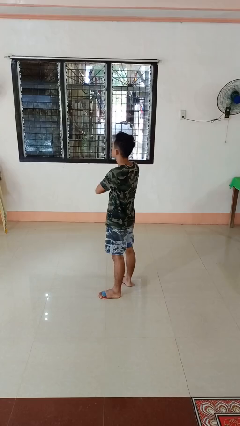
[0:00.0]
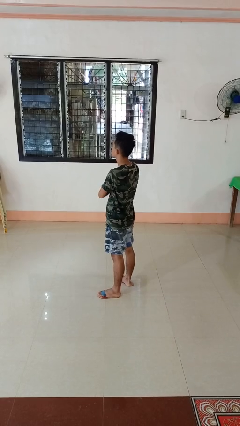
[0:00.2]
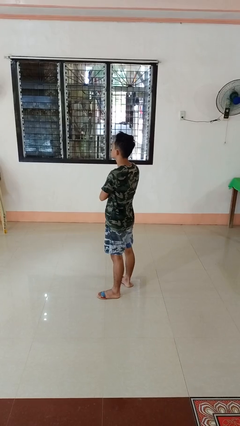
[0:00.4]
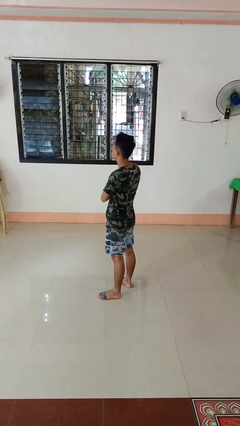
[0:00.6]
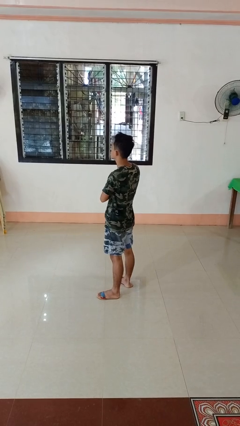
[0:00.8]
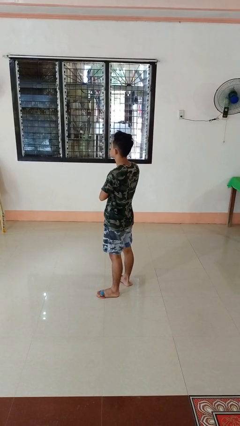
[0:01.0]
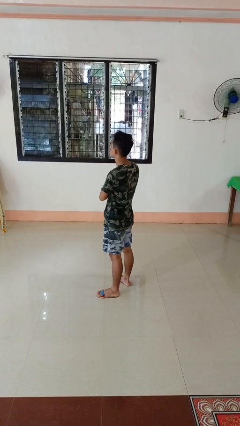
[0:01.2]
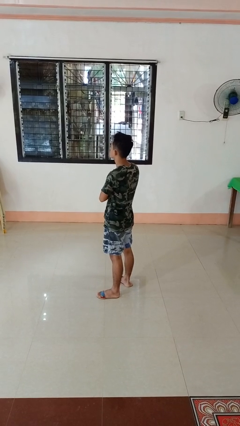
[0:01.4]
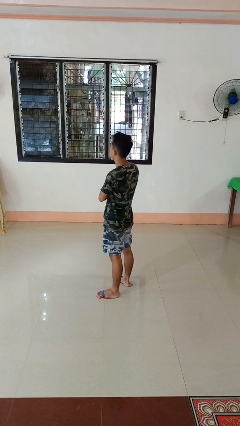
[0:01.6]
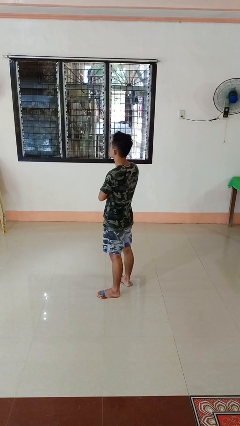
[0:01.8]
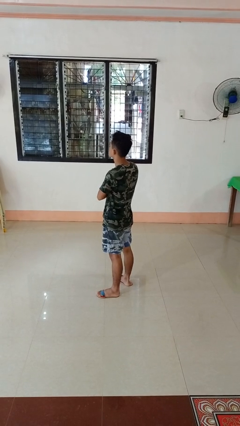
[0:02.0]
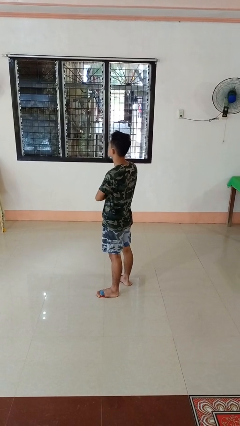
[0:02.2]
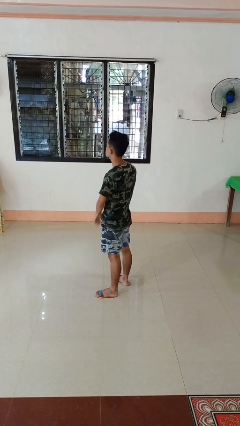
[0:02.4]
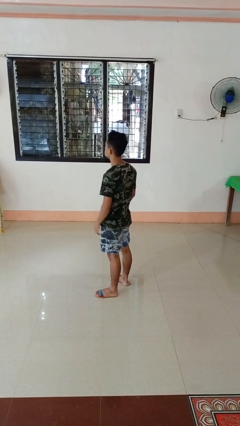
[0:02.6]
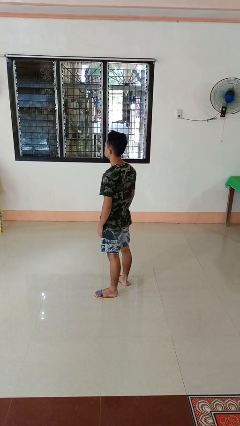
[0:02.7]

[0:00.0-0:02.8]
person crosses arms

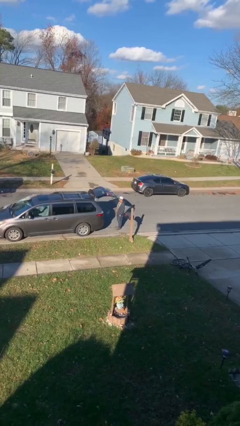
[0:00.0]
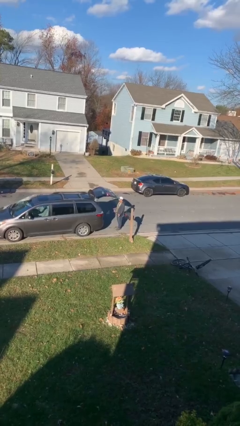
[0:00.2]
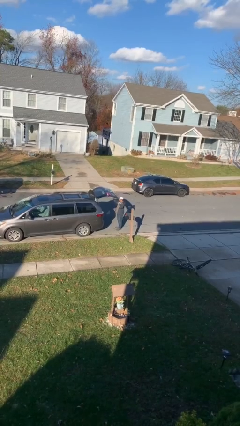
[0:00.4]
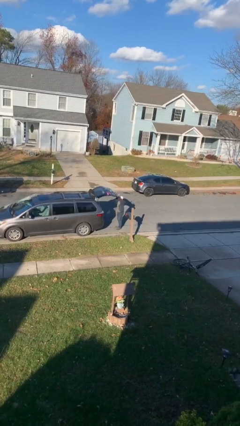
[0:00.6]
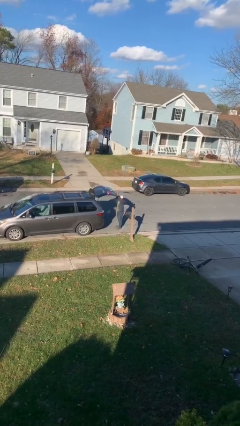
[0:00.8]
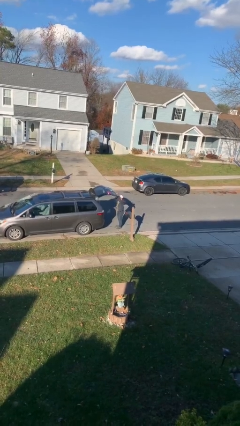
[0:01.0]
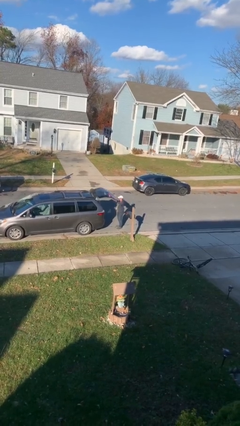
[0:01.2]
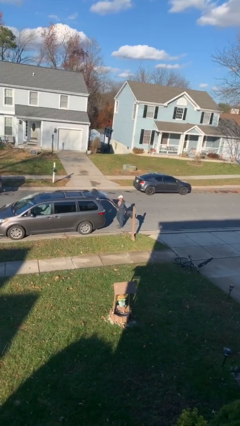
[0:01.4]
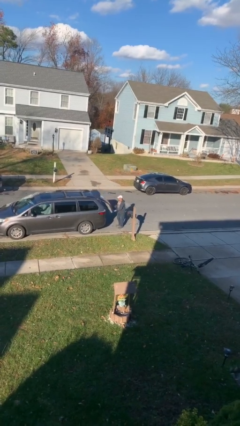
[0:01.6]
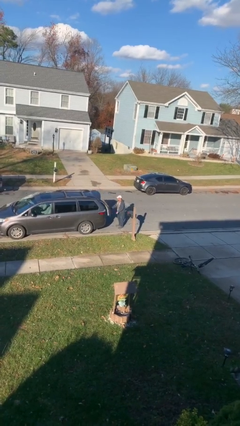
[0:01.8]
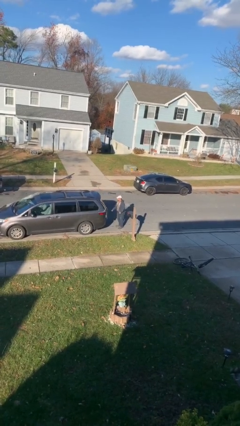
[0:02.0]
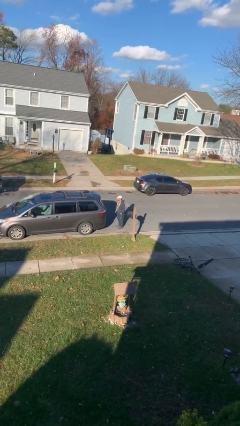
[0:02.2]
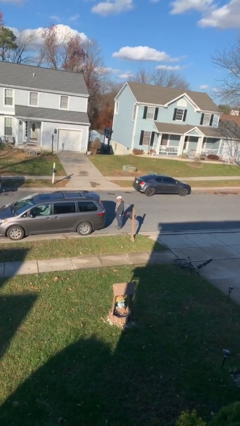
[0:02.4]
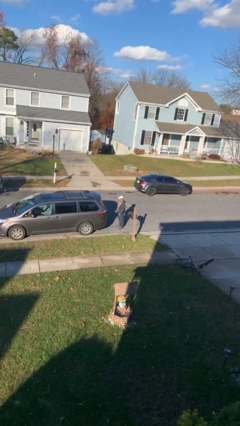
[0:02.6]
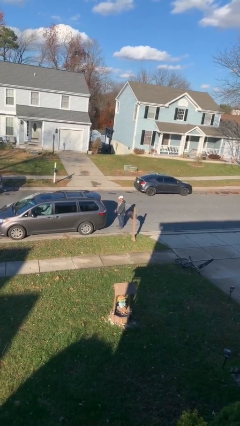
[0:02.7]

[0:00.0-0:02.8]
person closes car trunk

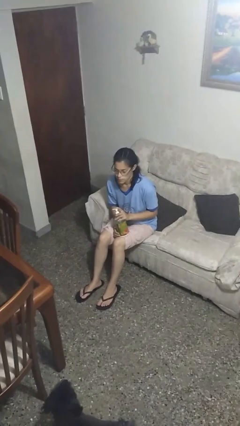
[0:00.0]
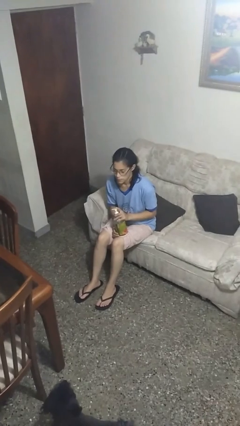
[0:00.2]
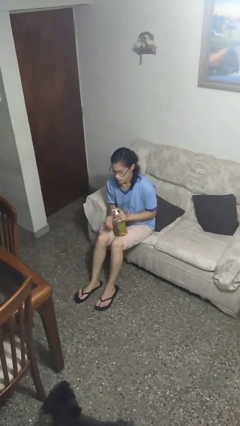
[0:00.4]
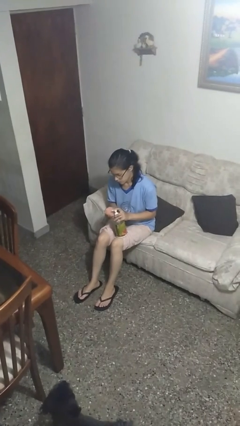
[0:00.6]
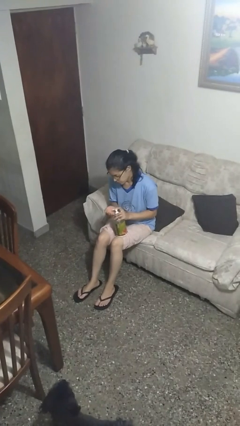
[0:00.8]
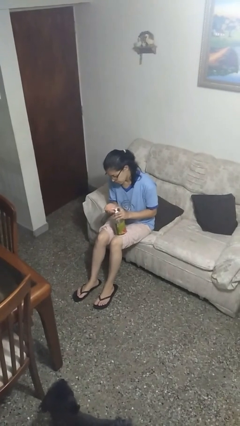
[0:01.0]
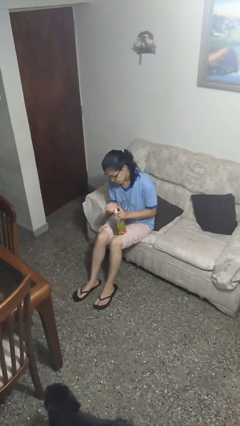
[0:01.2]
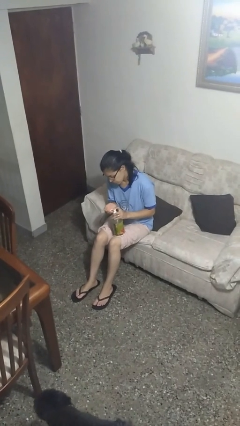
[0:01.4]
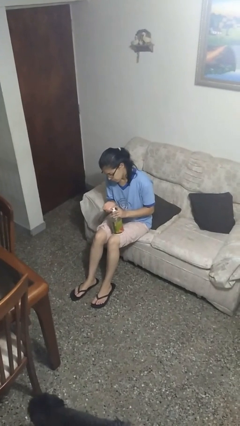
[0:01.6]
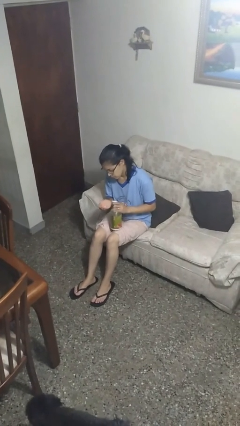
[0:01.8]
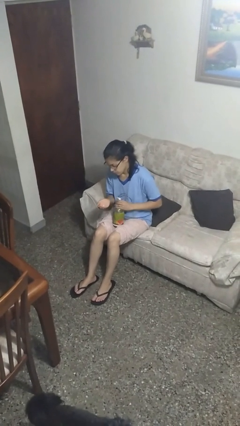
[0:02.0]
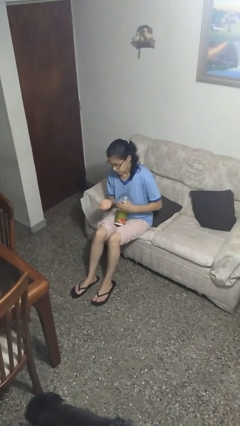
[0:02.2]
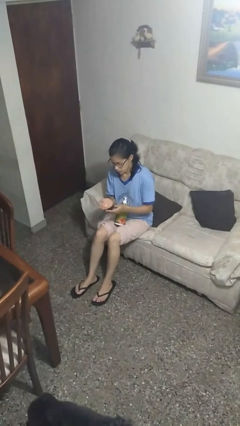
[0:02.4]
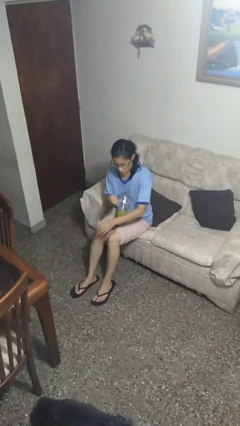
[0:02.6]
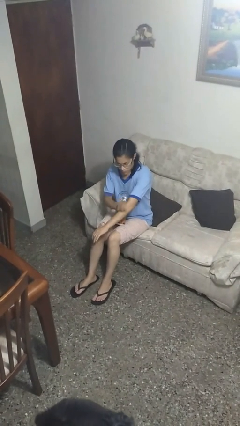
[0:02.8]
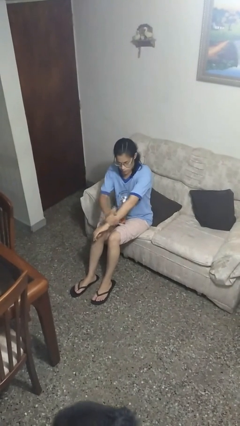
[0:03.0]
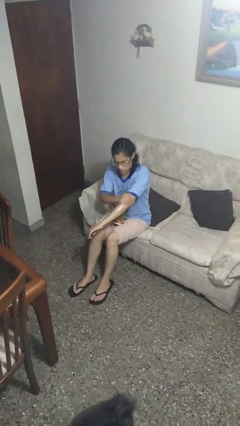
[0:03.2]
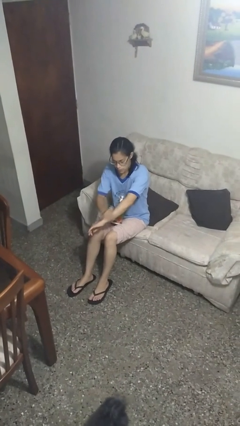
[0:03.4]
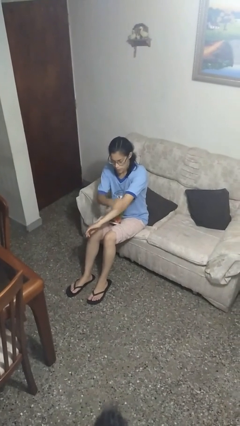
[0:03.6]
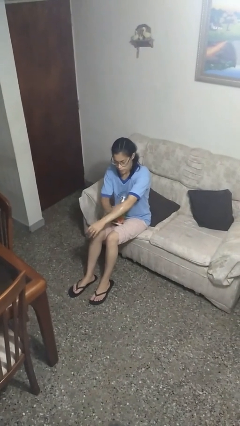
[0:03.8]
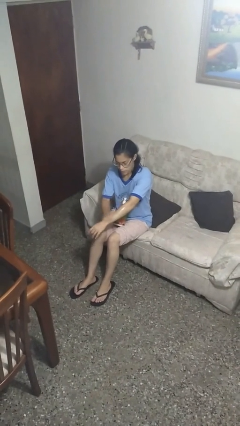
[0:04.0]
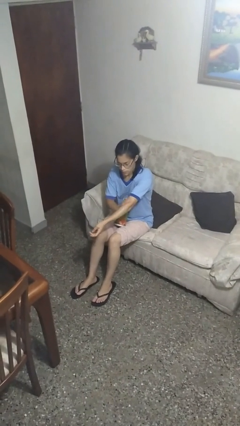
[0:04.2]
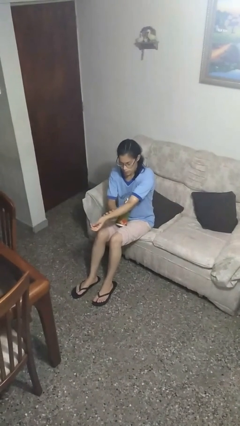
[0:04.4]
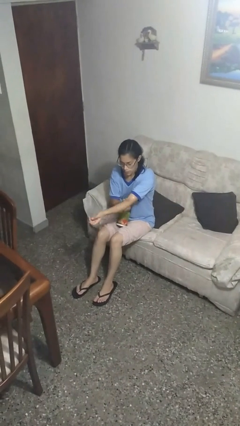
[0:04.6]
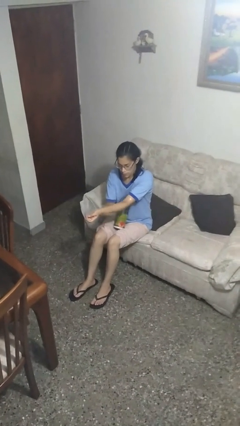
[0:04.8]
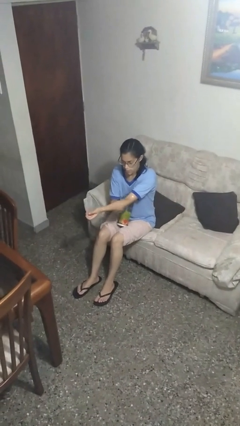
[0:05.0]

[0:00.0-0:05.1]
person applies sunscreen

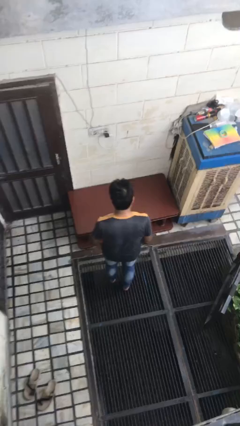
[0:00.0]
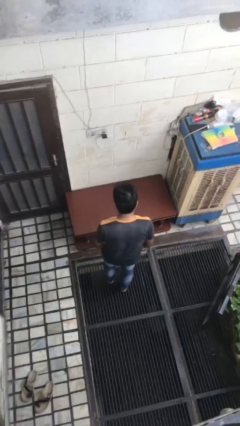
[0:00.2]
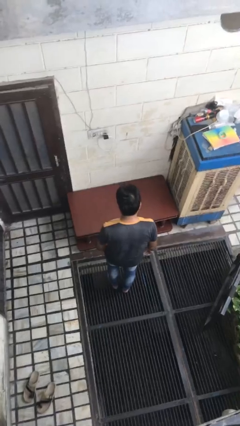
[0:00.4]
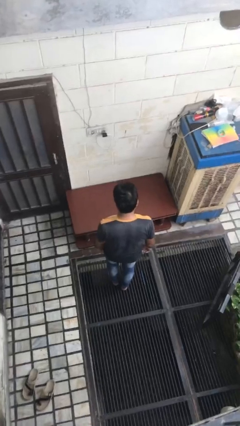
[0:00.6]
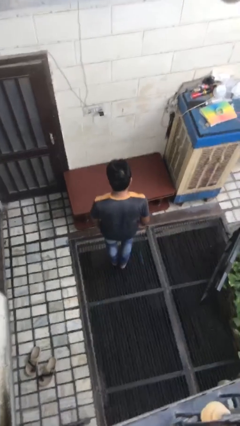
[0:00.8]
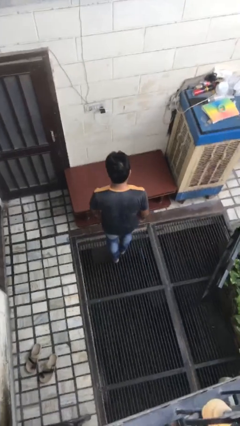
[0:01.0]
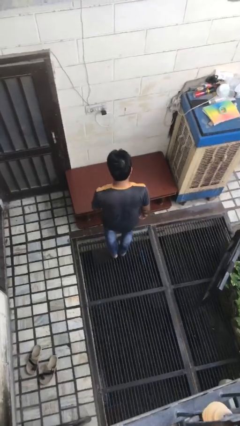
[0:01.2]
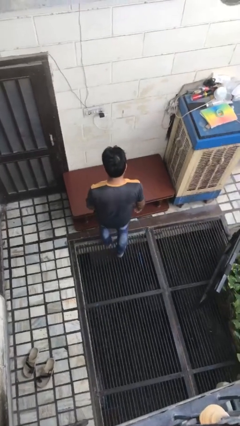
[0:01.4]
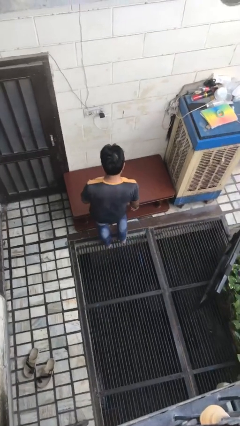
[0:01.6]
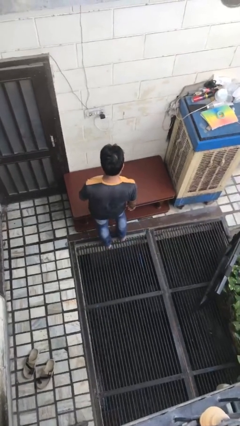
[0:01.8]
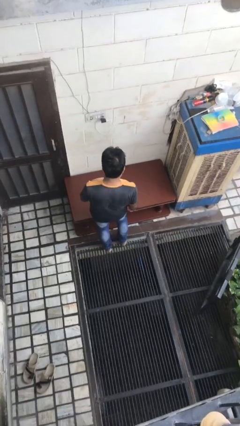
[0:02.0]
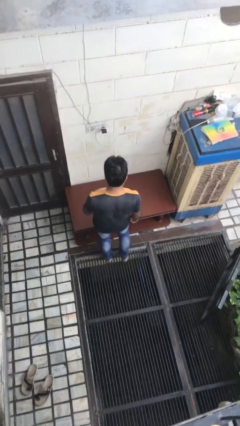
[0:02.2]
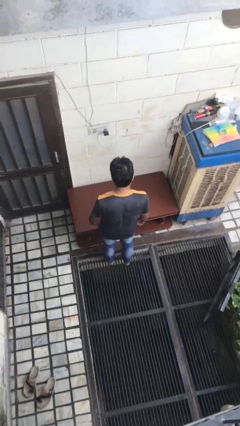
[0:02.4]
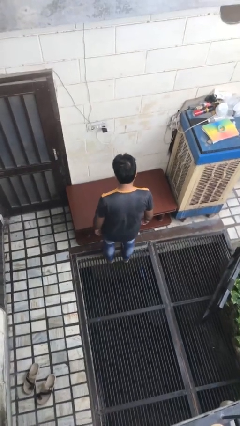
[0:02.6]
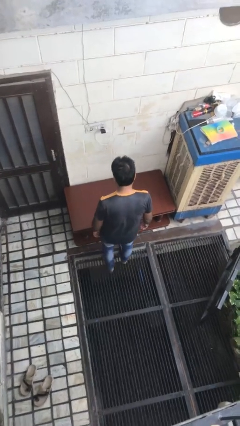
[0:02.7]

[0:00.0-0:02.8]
person stubs toe

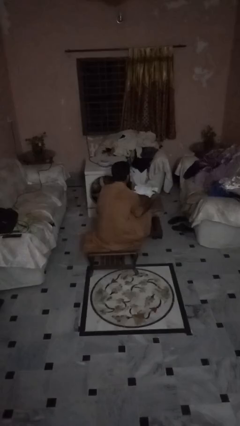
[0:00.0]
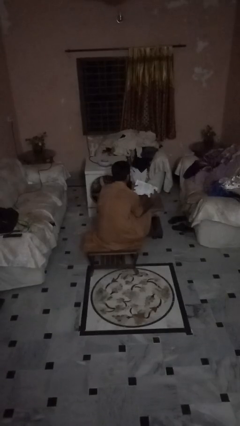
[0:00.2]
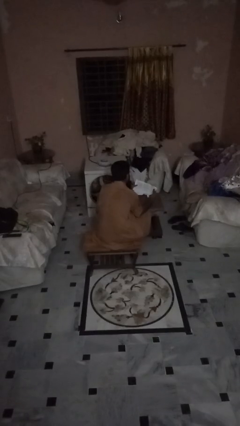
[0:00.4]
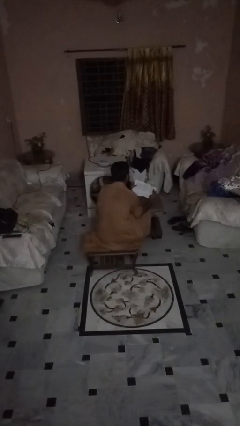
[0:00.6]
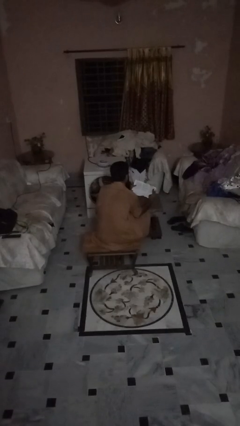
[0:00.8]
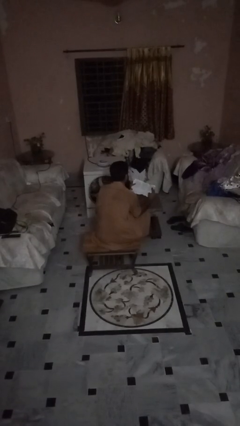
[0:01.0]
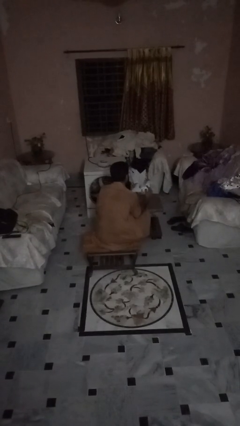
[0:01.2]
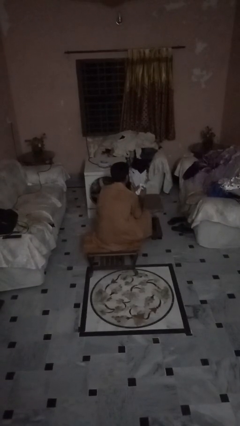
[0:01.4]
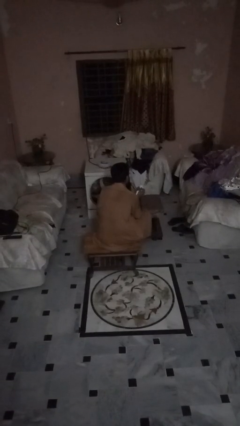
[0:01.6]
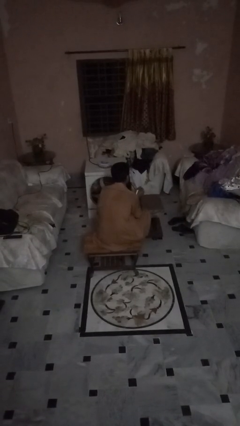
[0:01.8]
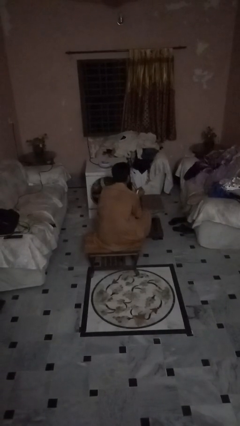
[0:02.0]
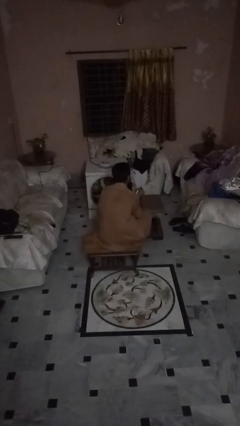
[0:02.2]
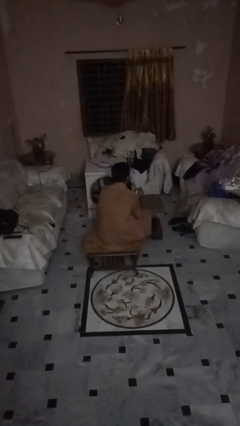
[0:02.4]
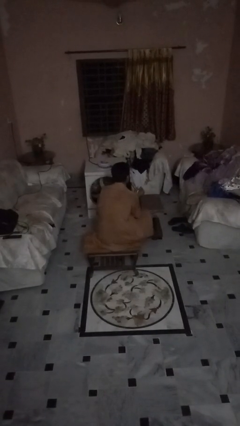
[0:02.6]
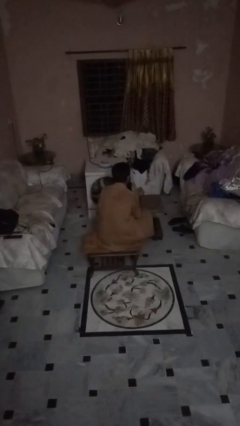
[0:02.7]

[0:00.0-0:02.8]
person crumples paper

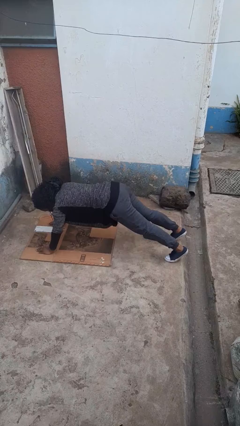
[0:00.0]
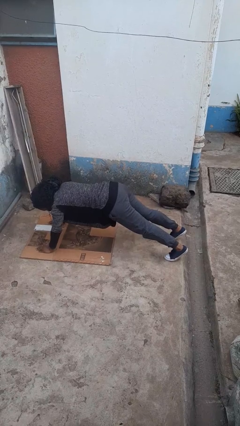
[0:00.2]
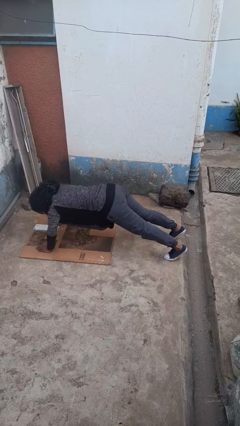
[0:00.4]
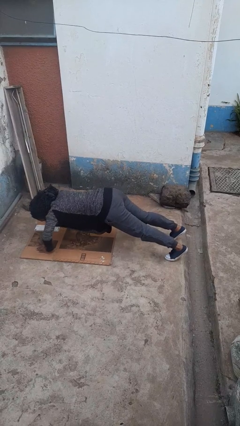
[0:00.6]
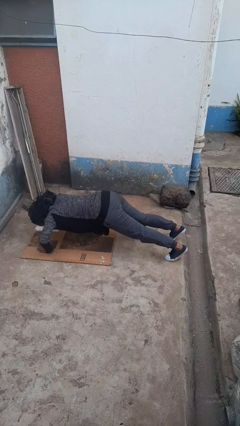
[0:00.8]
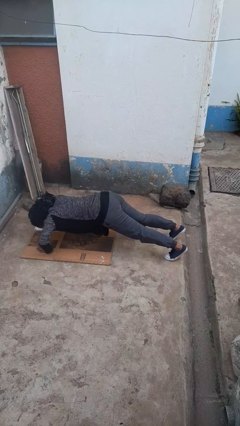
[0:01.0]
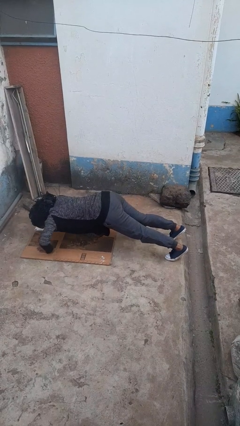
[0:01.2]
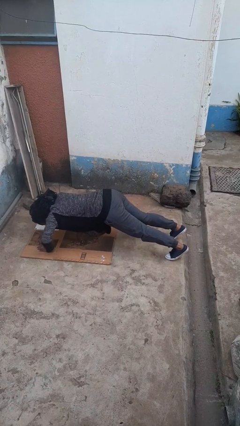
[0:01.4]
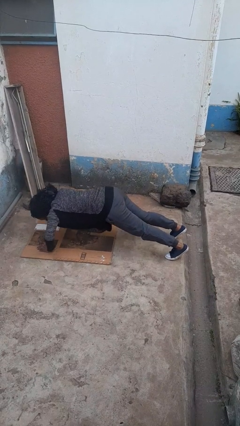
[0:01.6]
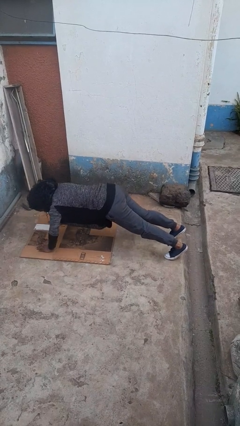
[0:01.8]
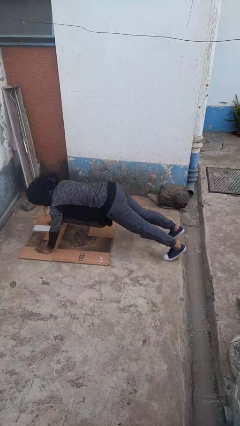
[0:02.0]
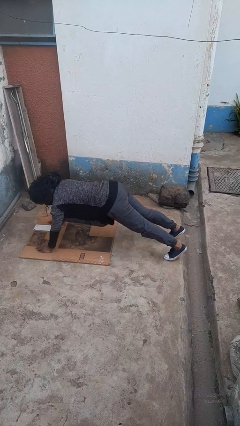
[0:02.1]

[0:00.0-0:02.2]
person exercises with pushup
